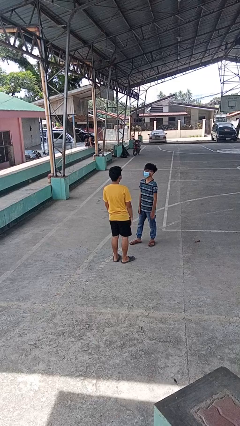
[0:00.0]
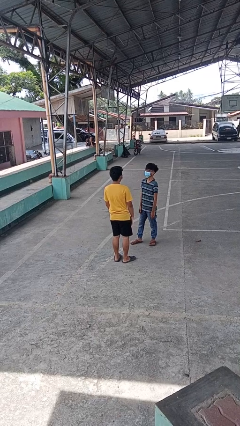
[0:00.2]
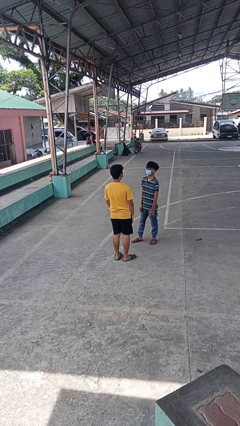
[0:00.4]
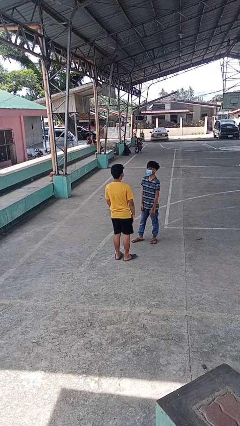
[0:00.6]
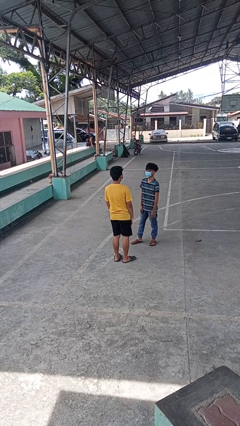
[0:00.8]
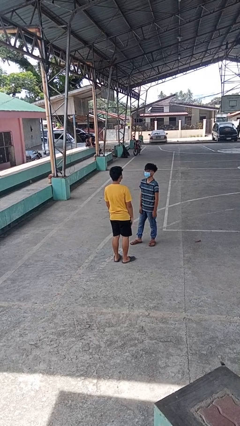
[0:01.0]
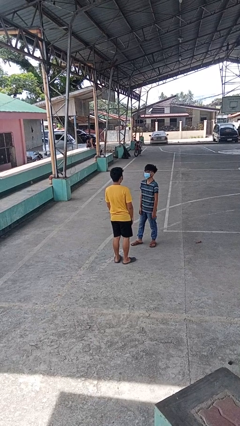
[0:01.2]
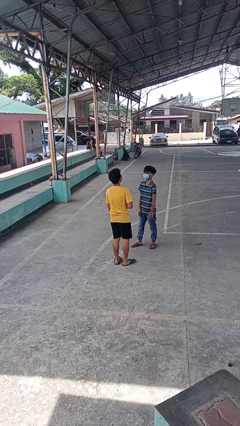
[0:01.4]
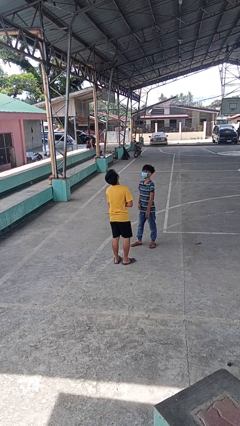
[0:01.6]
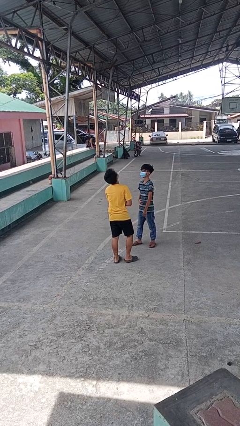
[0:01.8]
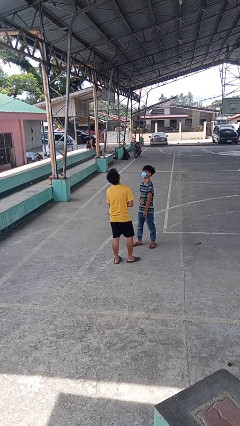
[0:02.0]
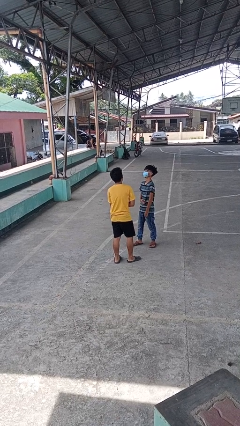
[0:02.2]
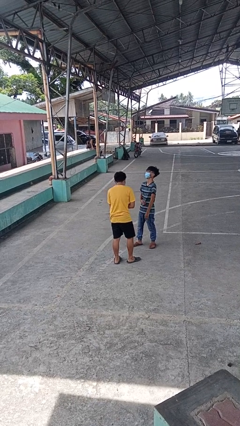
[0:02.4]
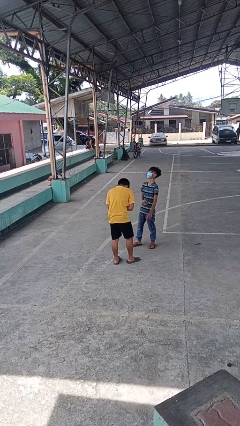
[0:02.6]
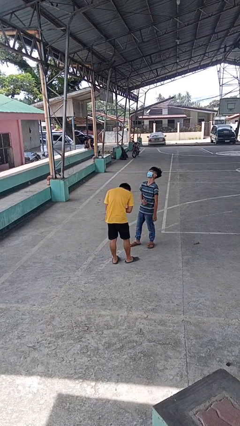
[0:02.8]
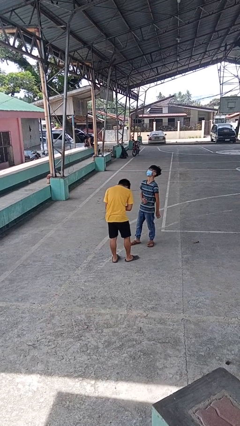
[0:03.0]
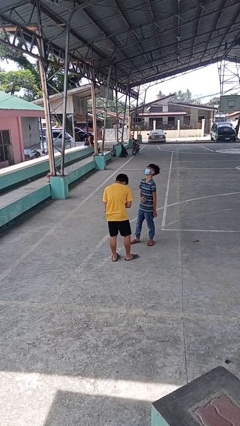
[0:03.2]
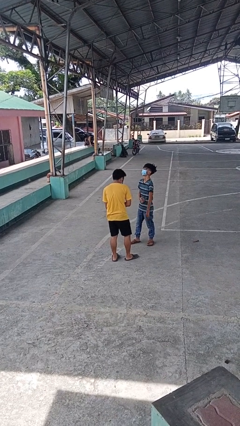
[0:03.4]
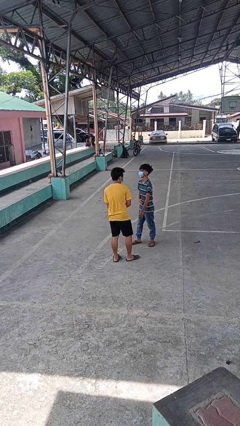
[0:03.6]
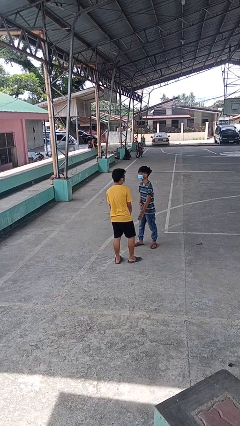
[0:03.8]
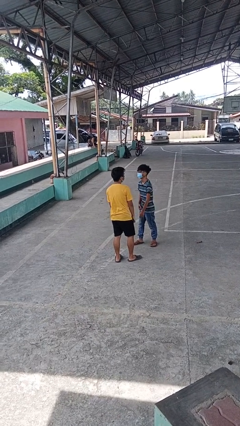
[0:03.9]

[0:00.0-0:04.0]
person laughs with person

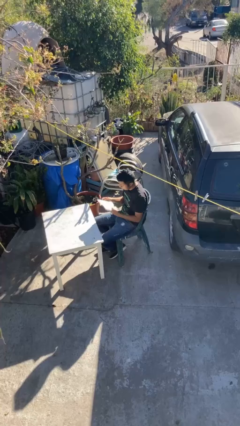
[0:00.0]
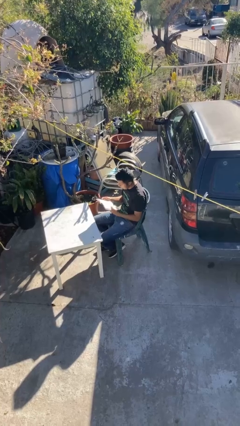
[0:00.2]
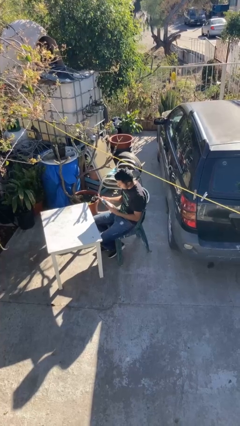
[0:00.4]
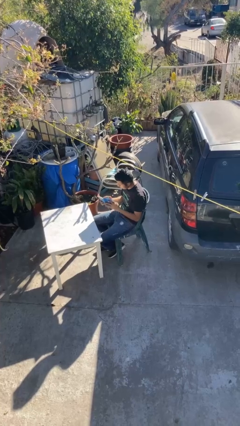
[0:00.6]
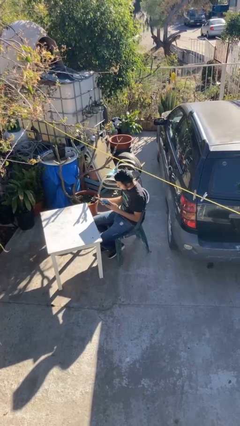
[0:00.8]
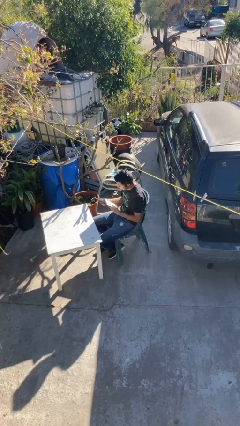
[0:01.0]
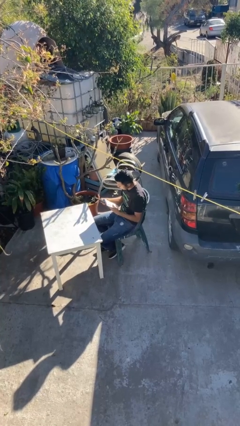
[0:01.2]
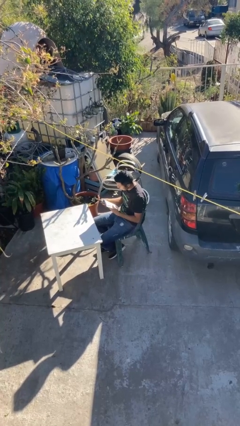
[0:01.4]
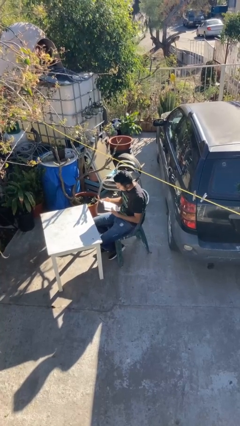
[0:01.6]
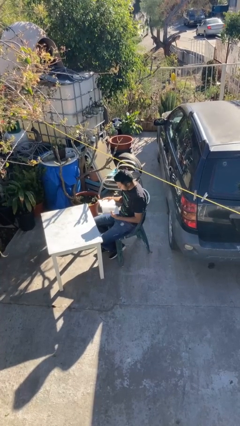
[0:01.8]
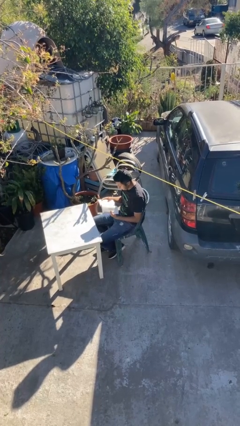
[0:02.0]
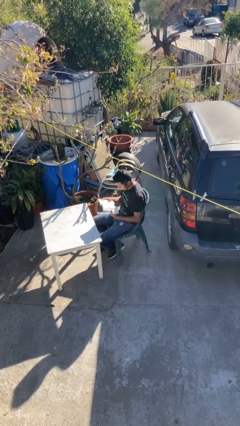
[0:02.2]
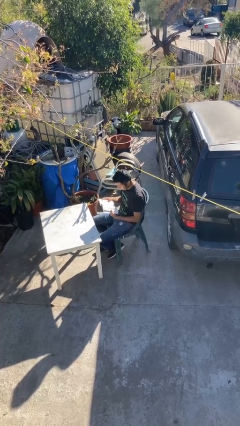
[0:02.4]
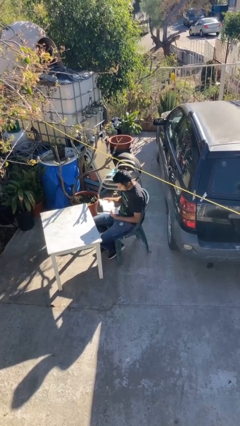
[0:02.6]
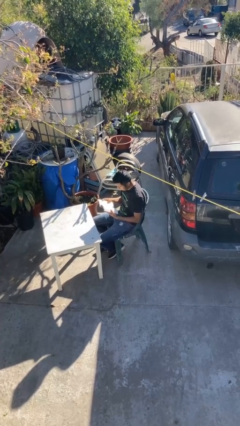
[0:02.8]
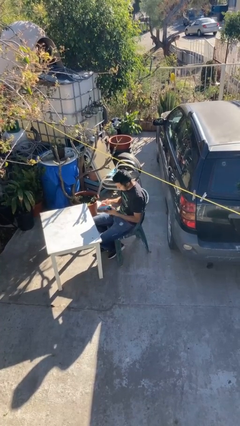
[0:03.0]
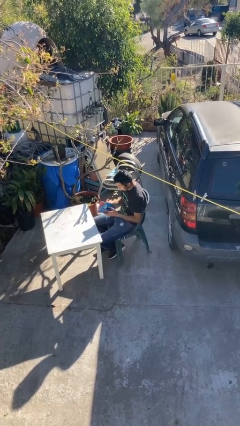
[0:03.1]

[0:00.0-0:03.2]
person reads document

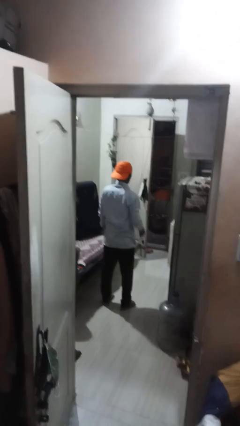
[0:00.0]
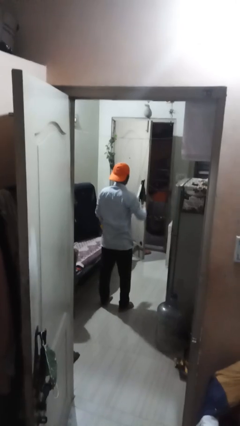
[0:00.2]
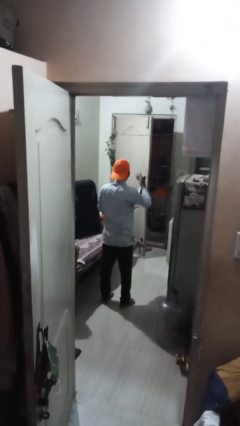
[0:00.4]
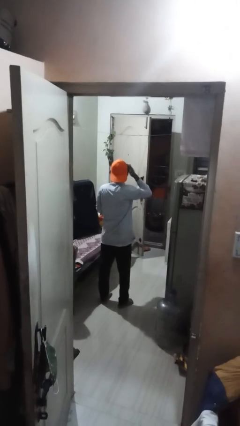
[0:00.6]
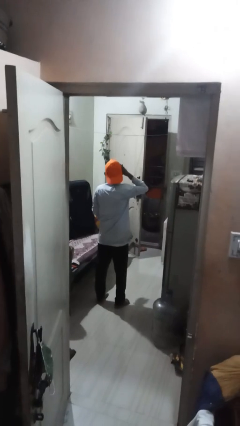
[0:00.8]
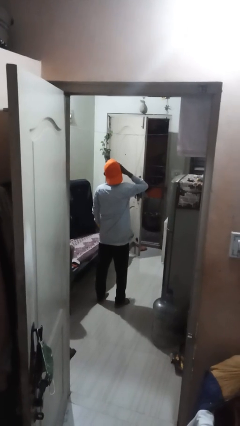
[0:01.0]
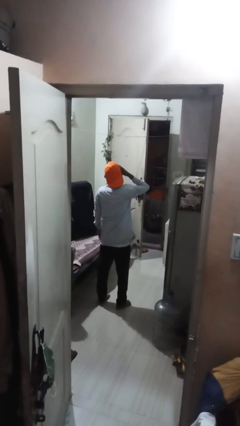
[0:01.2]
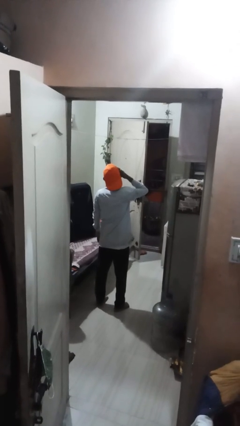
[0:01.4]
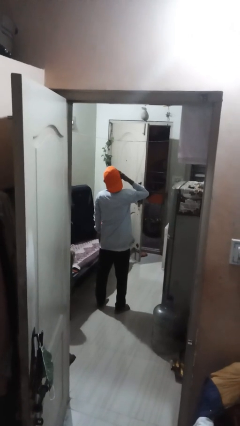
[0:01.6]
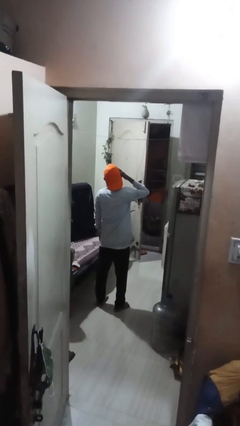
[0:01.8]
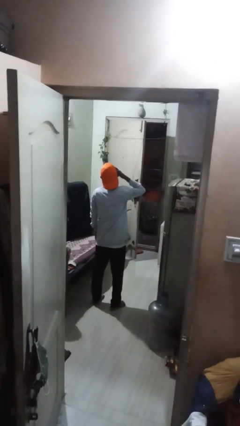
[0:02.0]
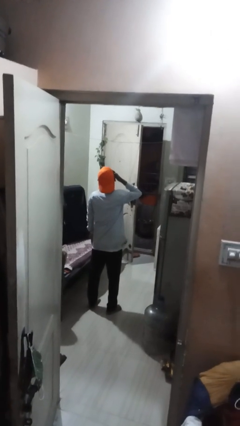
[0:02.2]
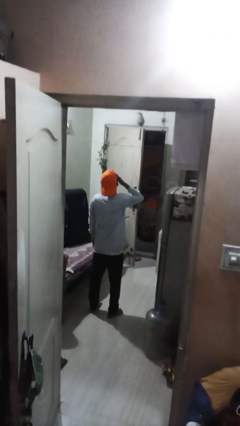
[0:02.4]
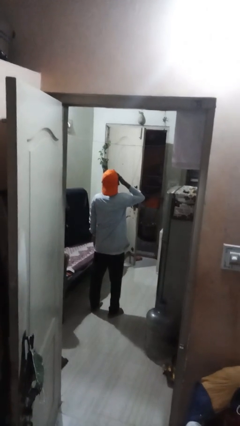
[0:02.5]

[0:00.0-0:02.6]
person covers face with hands

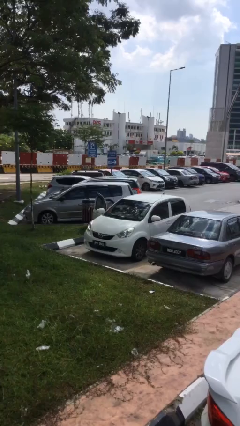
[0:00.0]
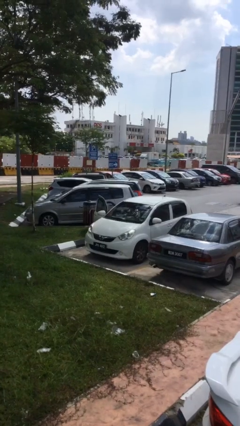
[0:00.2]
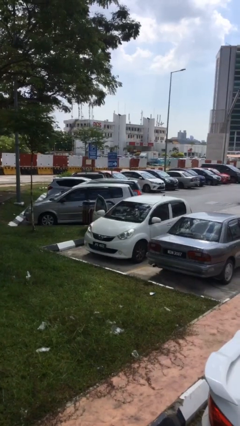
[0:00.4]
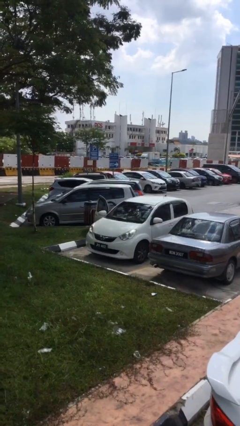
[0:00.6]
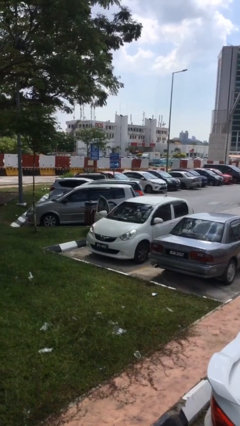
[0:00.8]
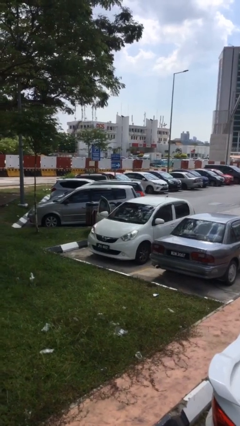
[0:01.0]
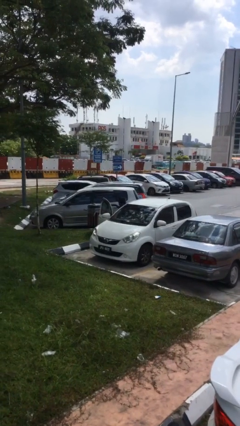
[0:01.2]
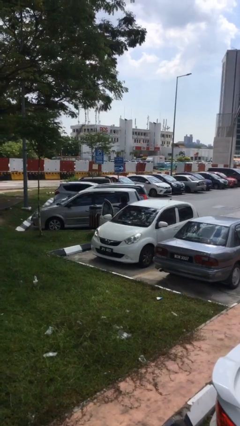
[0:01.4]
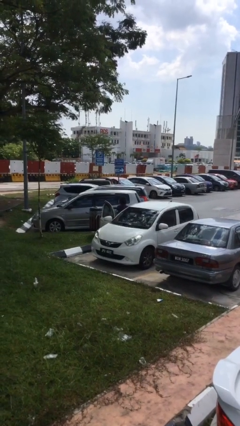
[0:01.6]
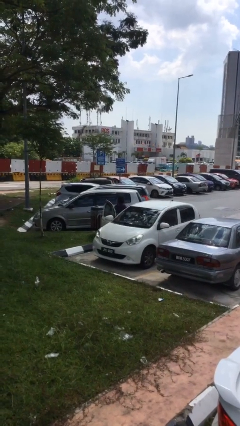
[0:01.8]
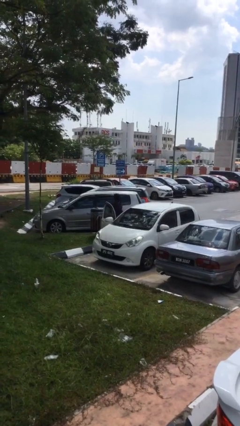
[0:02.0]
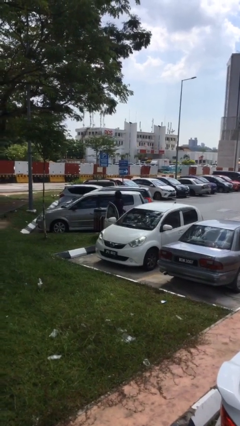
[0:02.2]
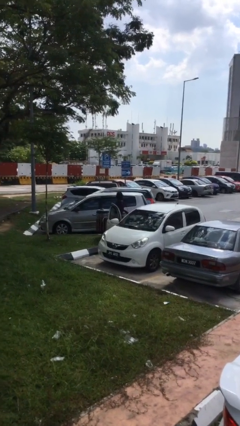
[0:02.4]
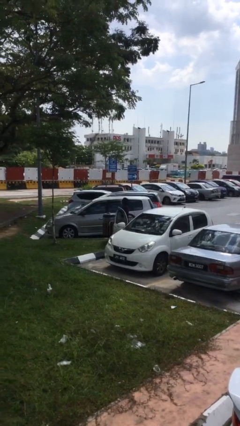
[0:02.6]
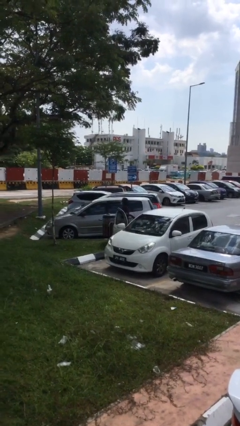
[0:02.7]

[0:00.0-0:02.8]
person exits car

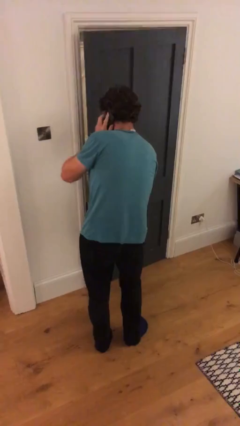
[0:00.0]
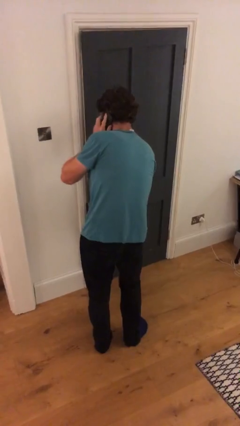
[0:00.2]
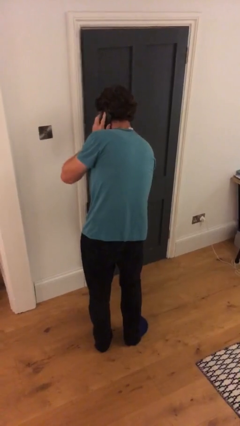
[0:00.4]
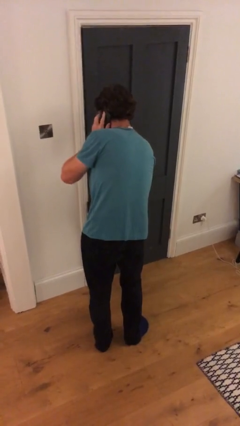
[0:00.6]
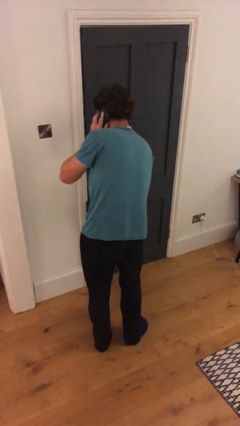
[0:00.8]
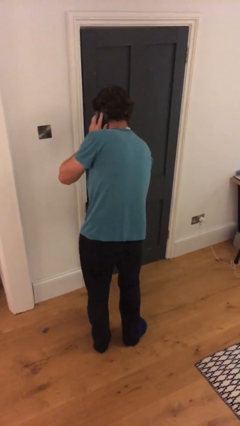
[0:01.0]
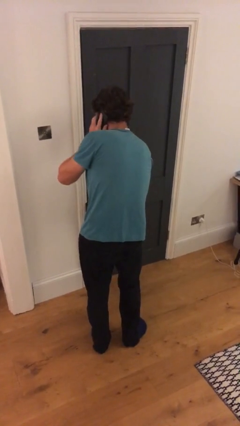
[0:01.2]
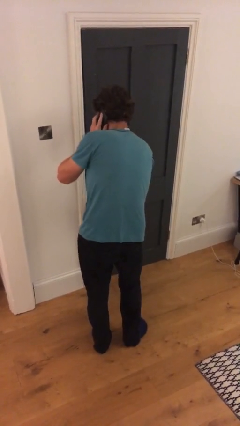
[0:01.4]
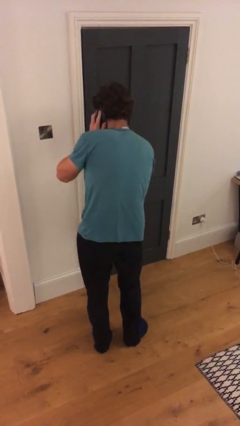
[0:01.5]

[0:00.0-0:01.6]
person closes facility door

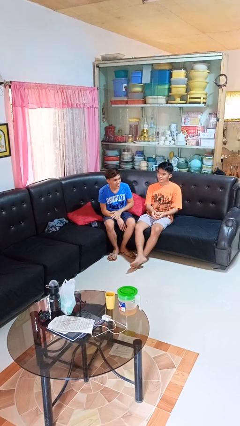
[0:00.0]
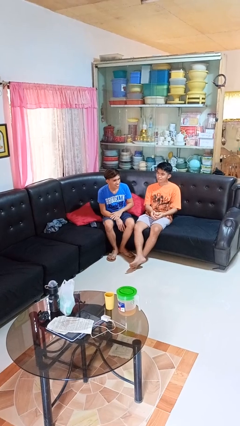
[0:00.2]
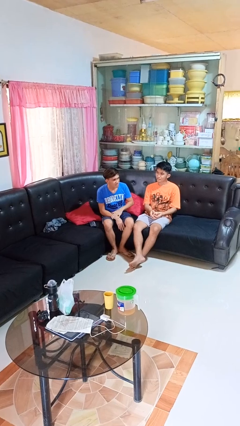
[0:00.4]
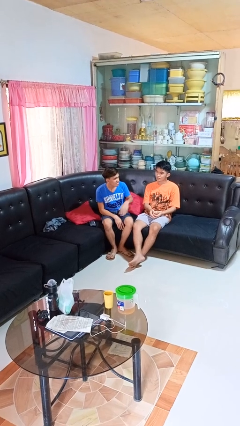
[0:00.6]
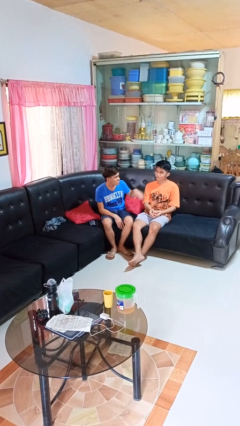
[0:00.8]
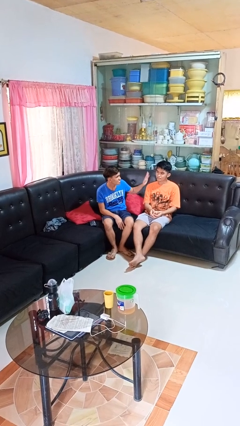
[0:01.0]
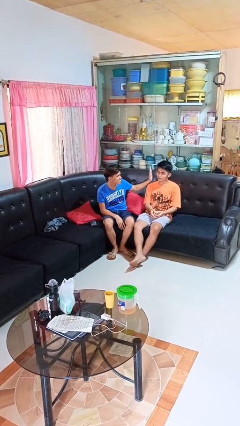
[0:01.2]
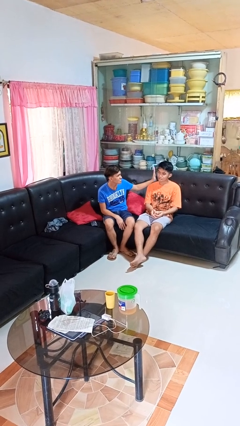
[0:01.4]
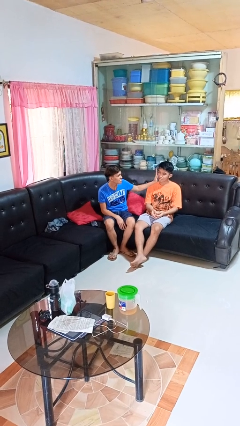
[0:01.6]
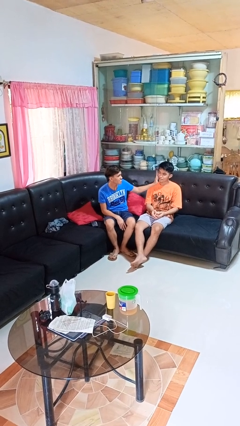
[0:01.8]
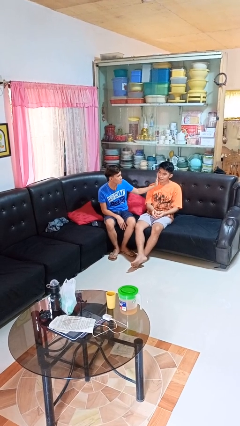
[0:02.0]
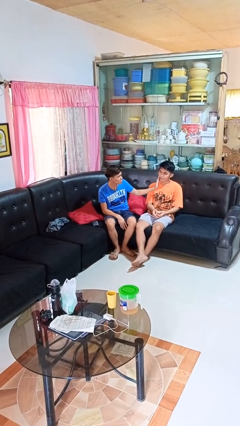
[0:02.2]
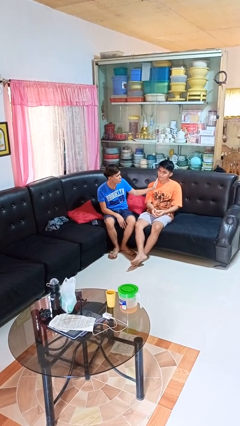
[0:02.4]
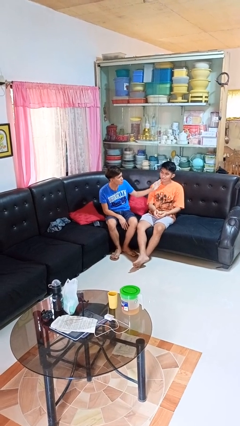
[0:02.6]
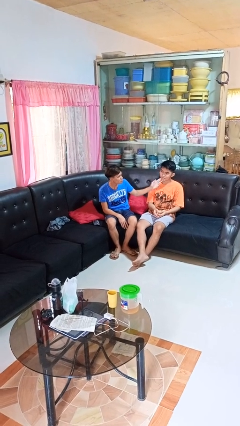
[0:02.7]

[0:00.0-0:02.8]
person touches face of person
